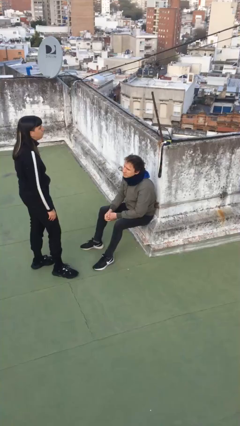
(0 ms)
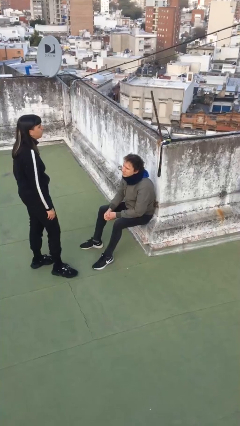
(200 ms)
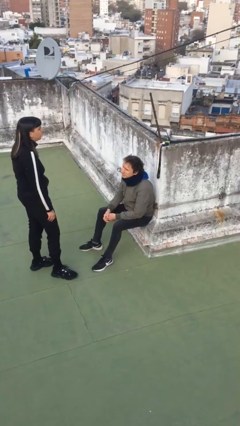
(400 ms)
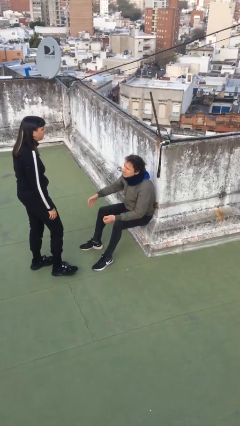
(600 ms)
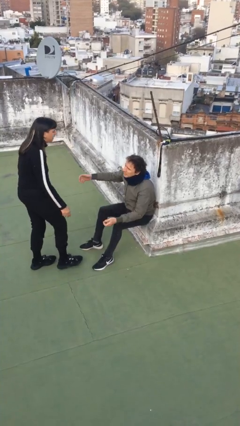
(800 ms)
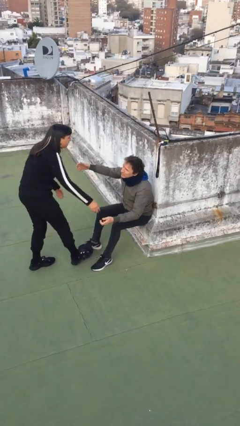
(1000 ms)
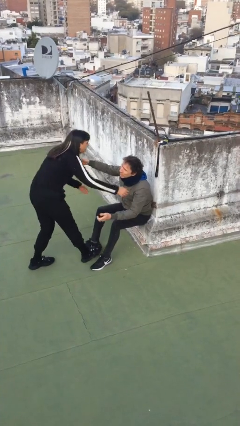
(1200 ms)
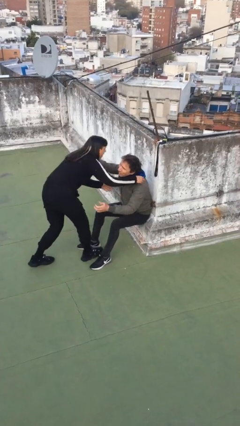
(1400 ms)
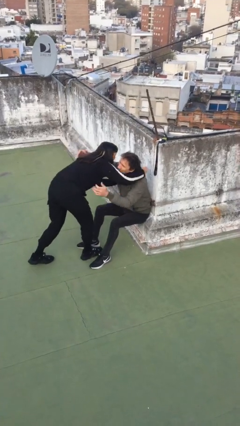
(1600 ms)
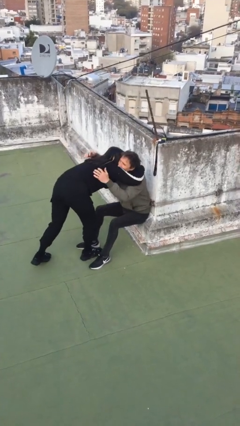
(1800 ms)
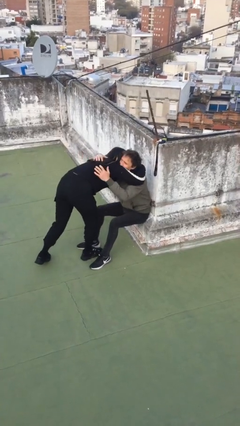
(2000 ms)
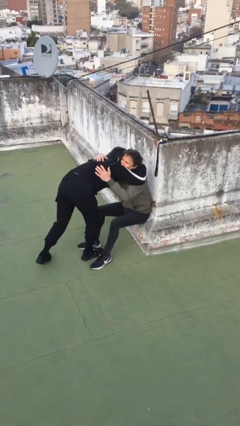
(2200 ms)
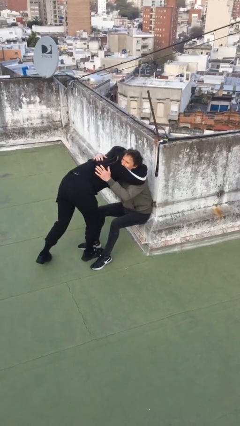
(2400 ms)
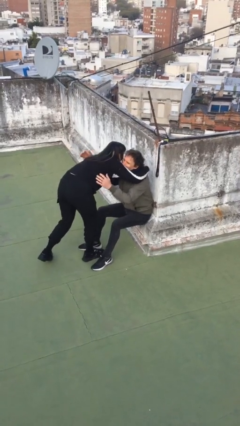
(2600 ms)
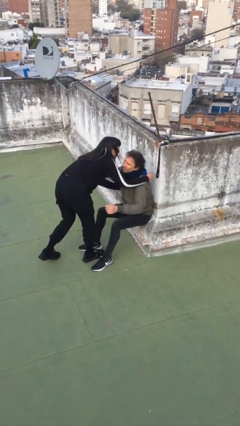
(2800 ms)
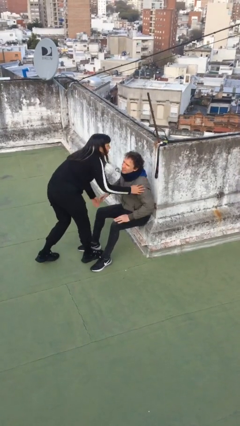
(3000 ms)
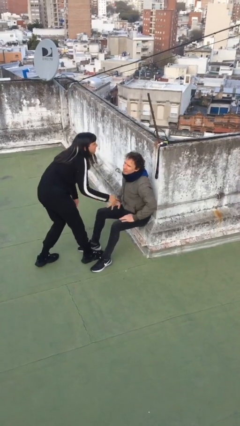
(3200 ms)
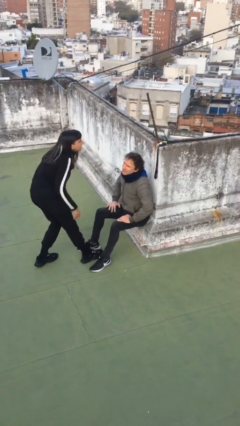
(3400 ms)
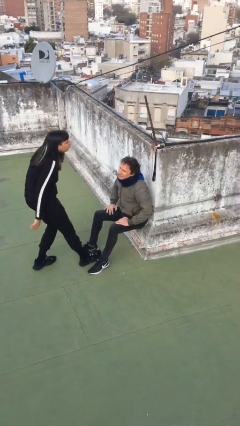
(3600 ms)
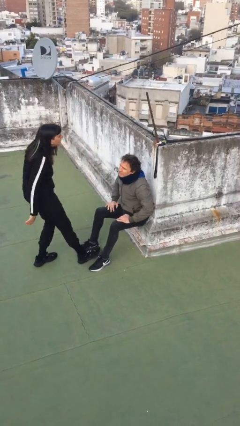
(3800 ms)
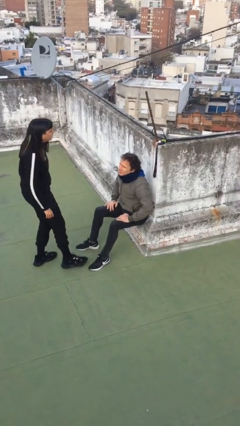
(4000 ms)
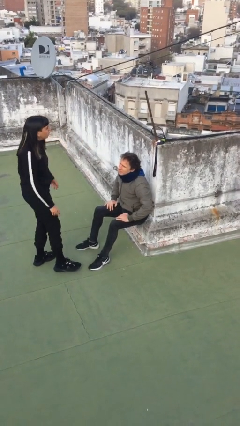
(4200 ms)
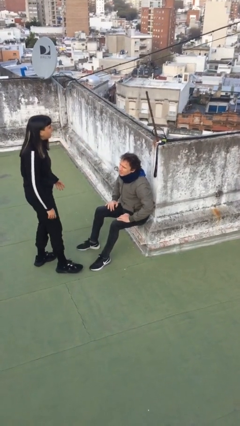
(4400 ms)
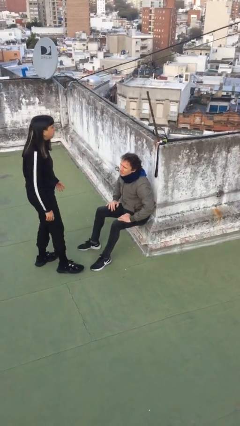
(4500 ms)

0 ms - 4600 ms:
person embraces person

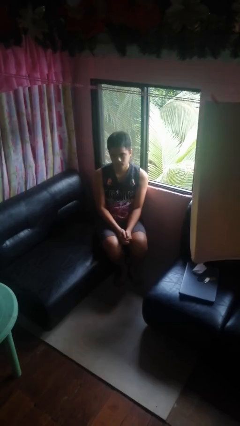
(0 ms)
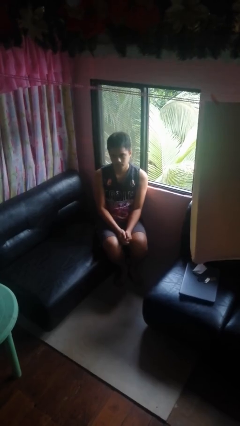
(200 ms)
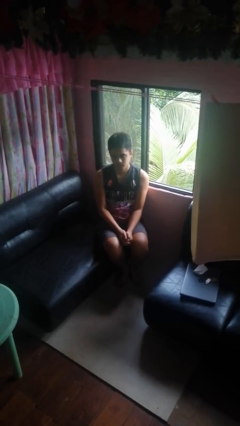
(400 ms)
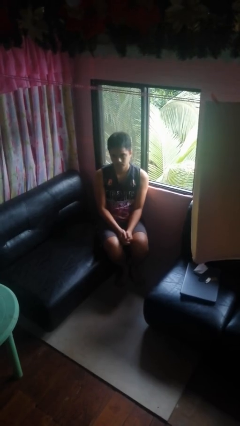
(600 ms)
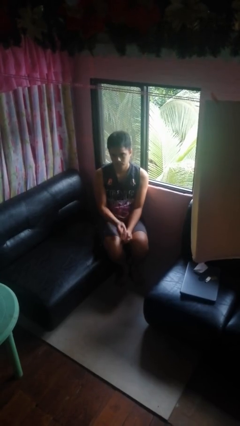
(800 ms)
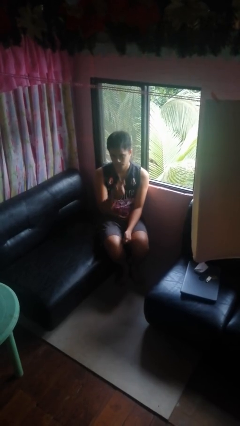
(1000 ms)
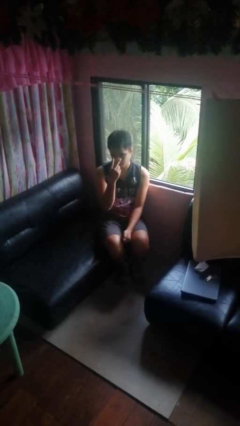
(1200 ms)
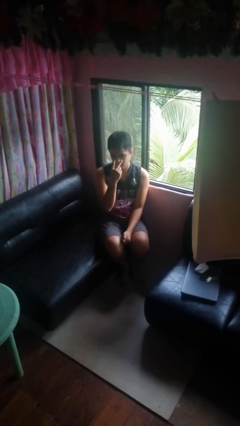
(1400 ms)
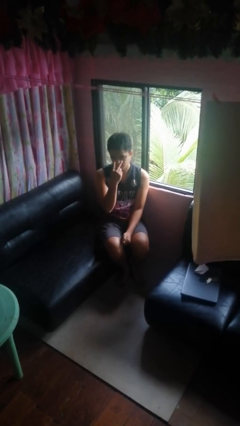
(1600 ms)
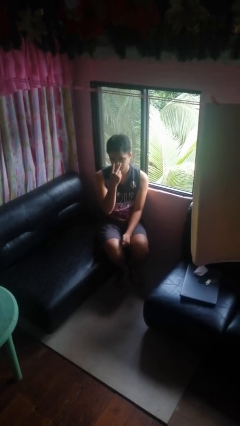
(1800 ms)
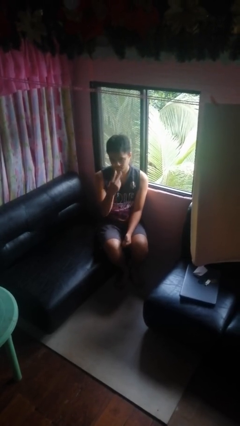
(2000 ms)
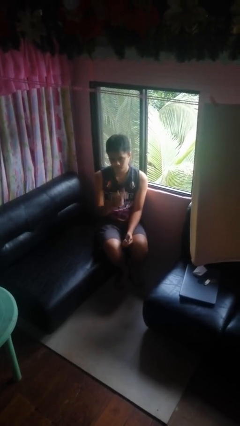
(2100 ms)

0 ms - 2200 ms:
person gestures watch closely

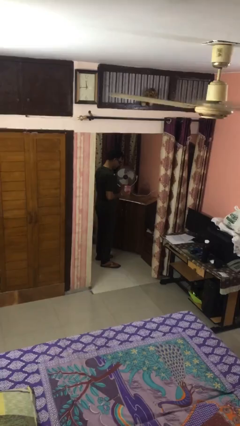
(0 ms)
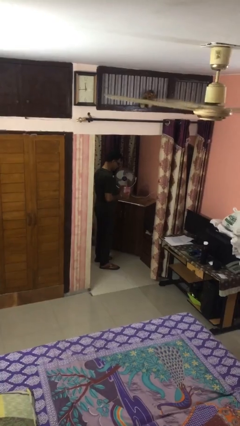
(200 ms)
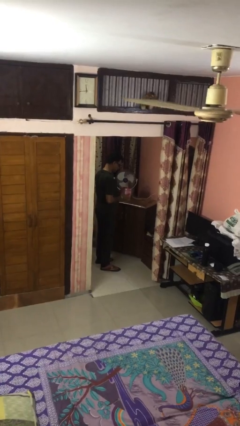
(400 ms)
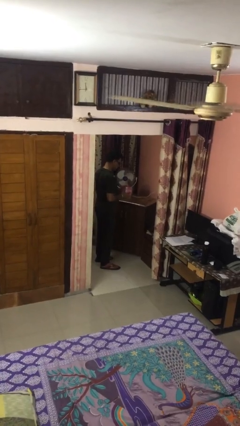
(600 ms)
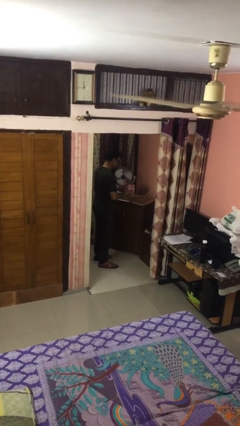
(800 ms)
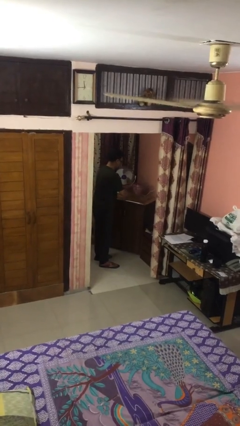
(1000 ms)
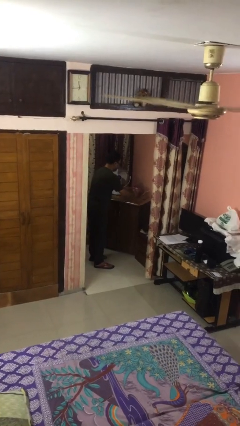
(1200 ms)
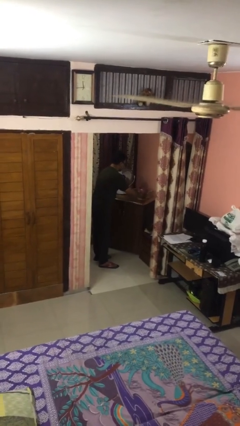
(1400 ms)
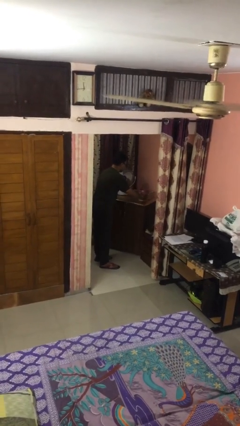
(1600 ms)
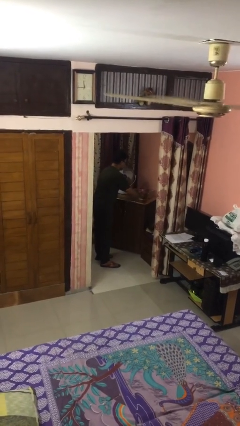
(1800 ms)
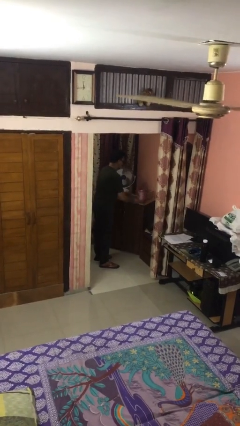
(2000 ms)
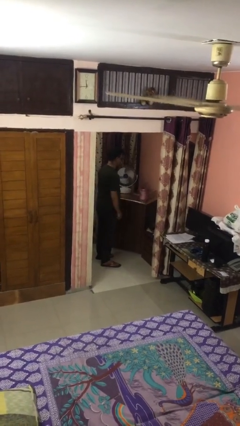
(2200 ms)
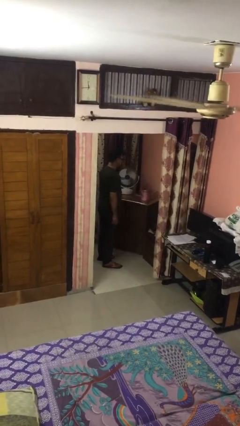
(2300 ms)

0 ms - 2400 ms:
person puts down object on countertop

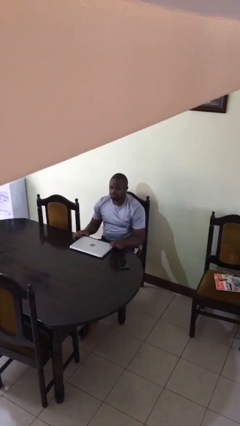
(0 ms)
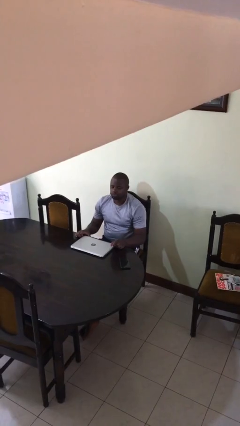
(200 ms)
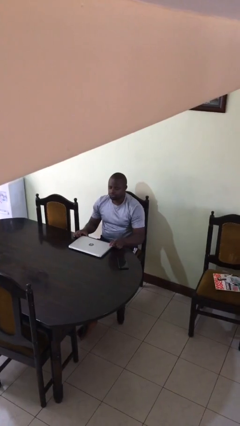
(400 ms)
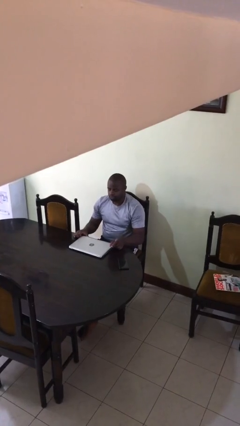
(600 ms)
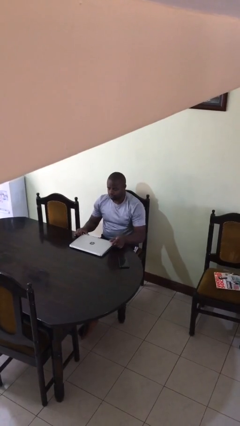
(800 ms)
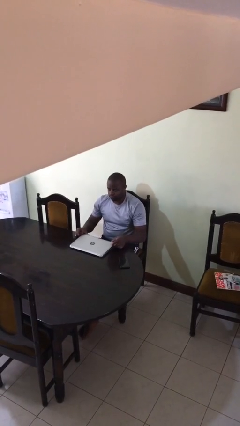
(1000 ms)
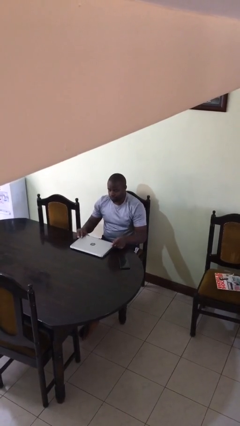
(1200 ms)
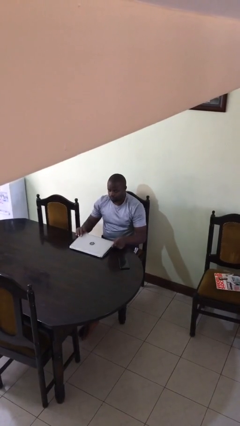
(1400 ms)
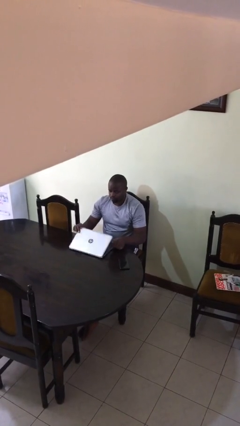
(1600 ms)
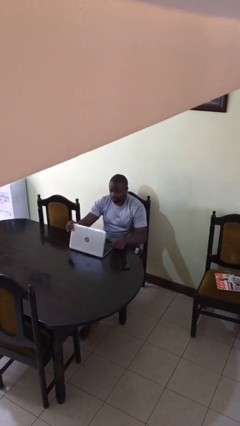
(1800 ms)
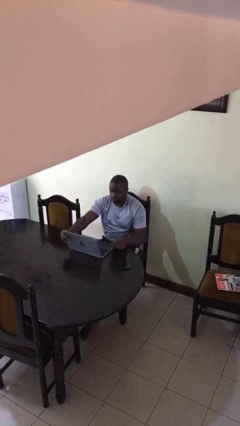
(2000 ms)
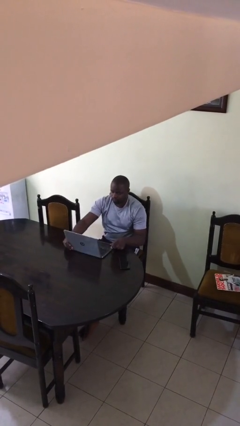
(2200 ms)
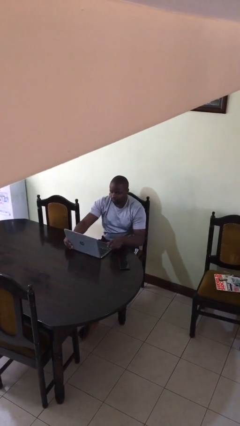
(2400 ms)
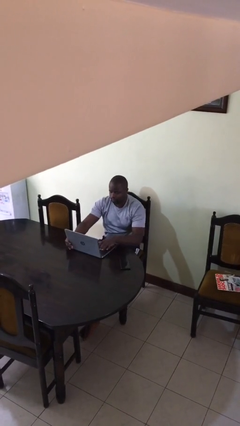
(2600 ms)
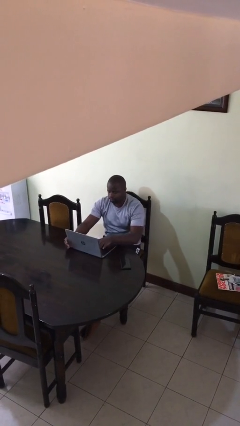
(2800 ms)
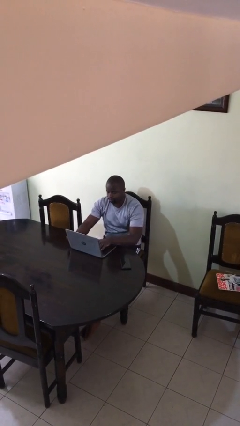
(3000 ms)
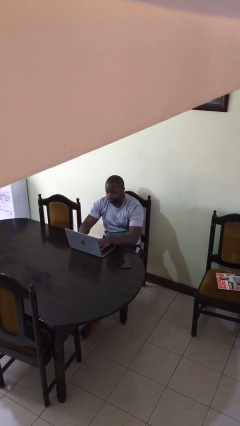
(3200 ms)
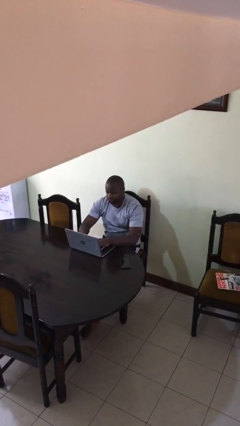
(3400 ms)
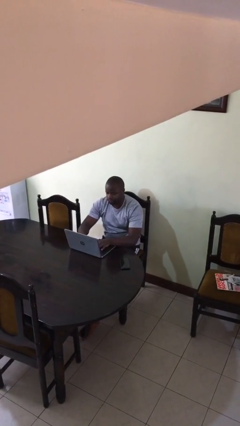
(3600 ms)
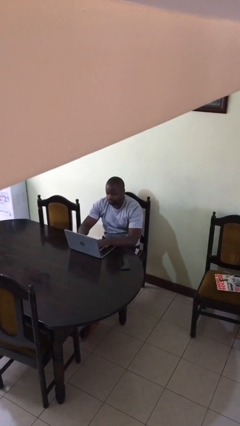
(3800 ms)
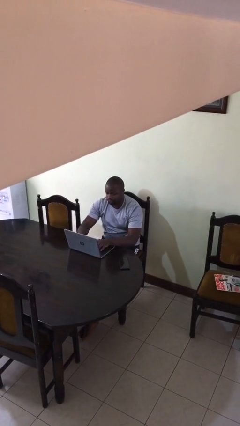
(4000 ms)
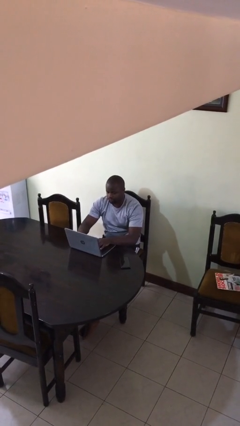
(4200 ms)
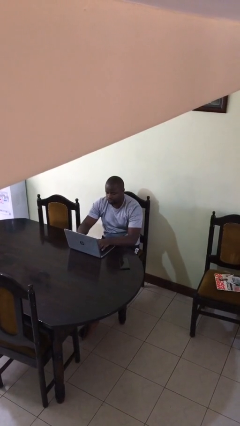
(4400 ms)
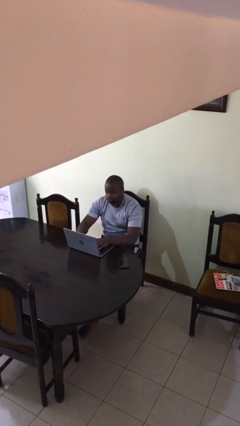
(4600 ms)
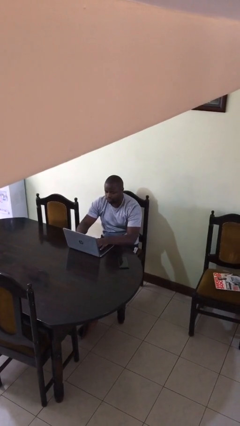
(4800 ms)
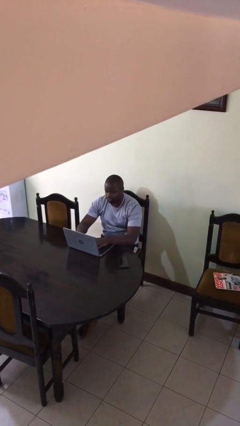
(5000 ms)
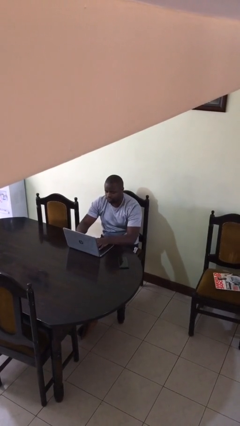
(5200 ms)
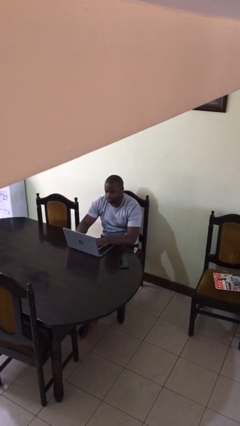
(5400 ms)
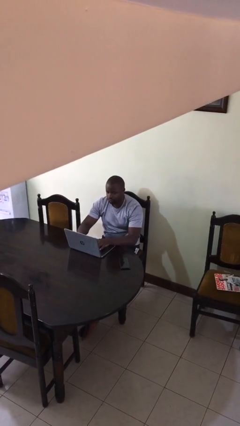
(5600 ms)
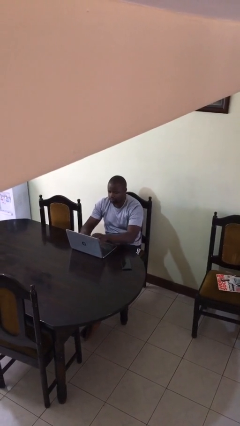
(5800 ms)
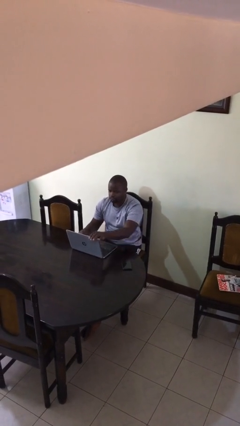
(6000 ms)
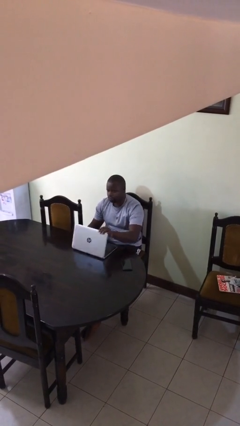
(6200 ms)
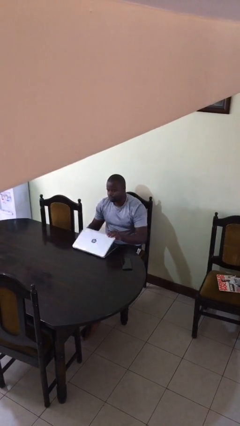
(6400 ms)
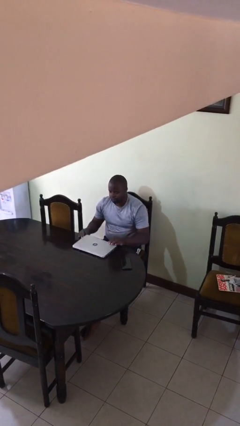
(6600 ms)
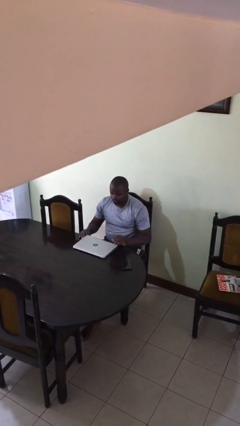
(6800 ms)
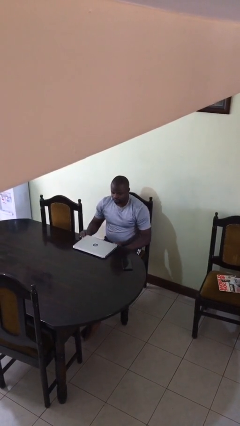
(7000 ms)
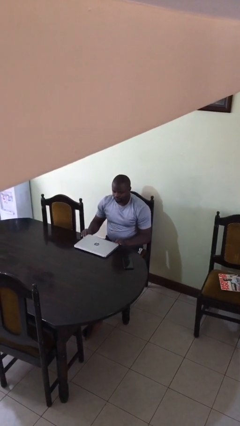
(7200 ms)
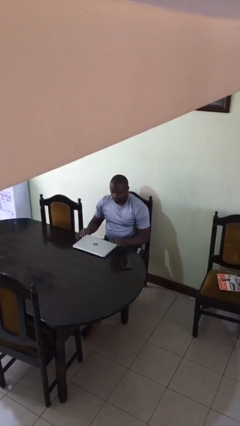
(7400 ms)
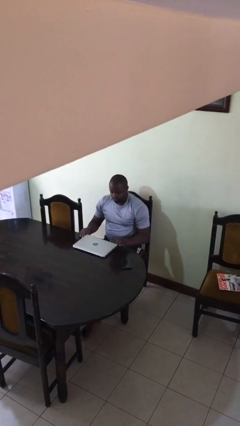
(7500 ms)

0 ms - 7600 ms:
person interacts with laptop

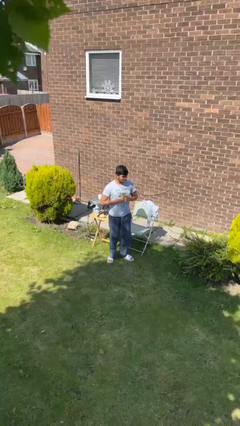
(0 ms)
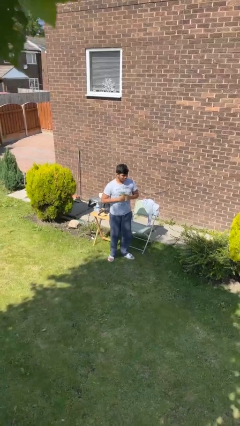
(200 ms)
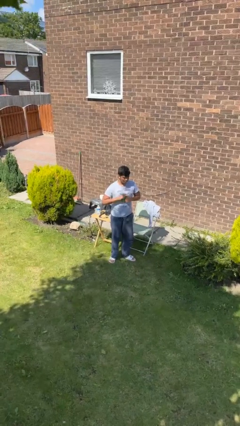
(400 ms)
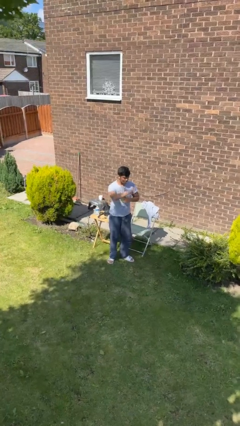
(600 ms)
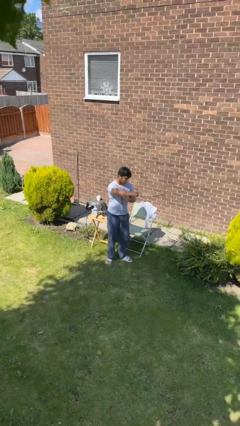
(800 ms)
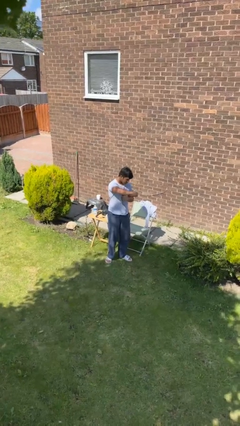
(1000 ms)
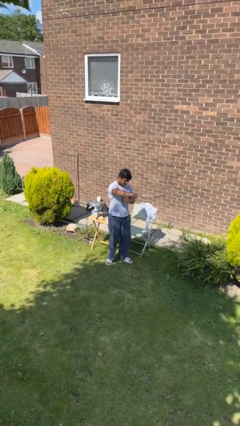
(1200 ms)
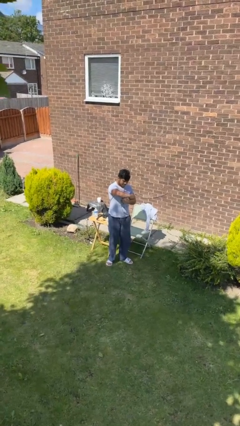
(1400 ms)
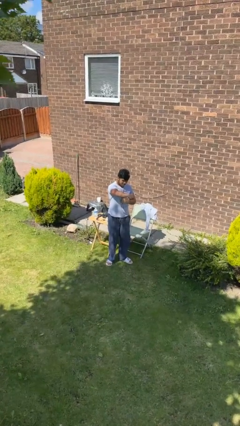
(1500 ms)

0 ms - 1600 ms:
person punches
